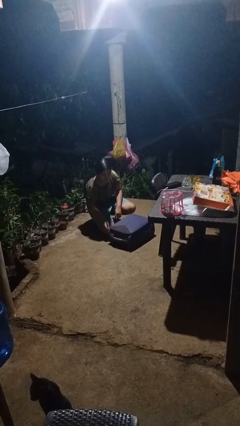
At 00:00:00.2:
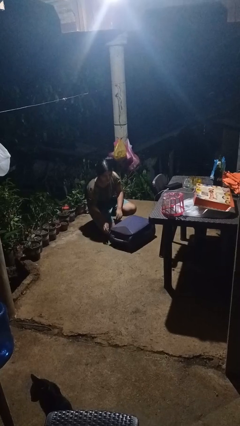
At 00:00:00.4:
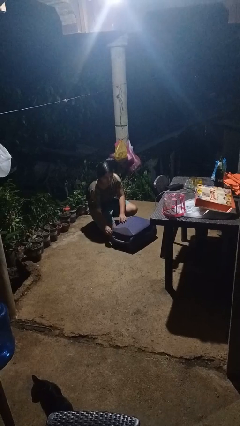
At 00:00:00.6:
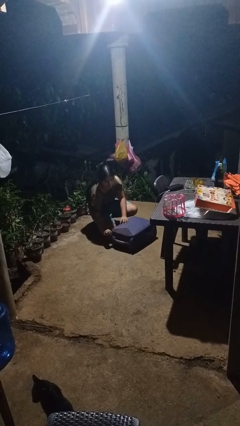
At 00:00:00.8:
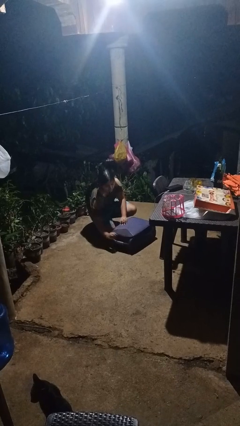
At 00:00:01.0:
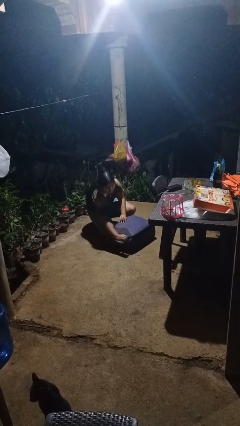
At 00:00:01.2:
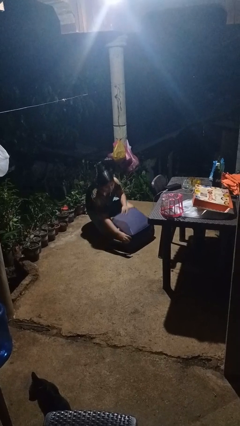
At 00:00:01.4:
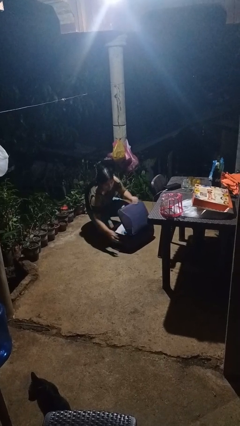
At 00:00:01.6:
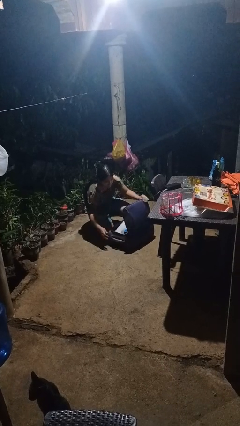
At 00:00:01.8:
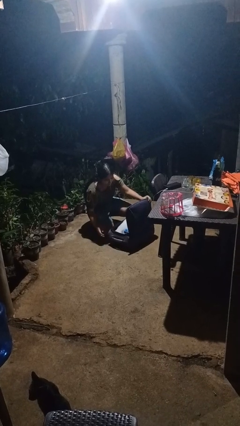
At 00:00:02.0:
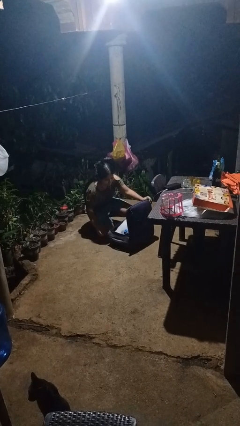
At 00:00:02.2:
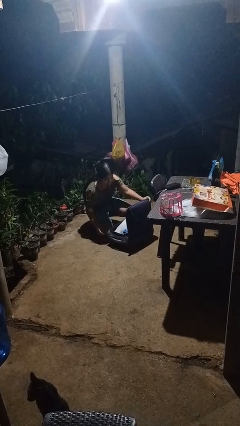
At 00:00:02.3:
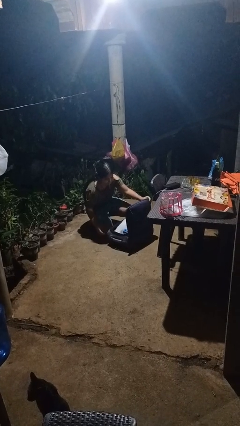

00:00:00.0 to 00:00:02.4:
person opens suitcase

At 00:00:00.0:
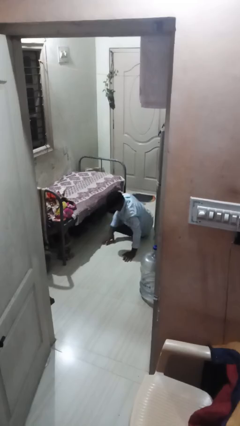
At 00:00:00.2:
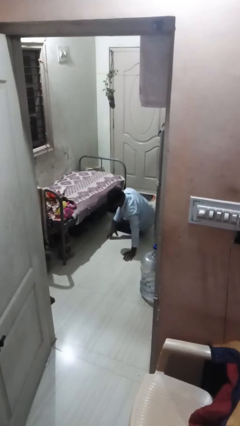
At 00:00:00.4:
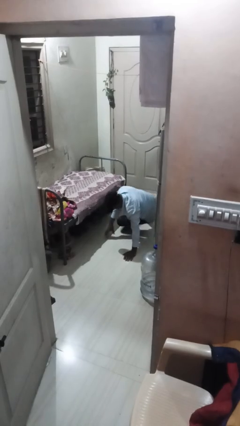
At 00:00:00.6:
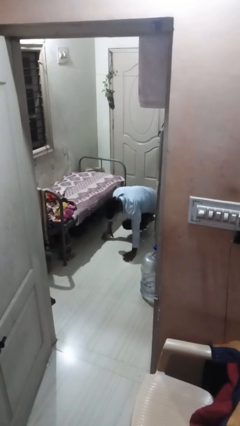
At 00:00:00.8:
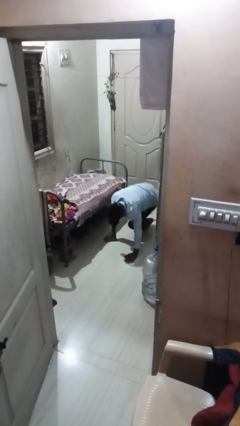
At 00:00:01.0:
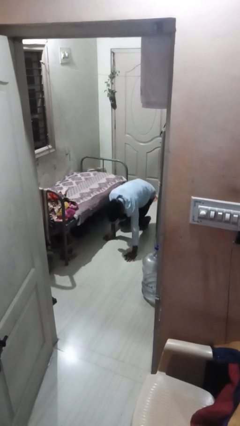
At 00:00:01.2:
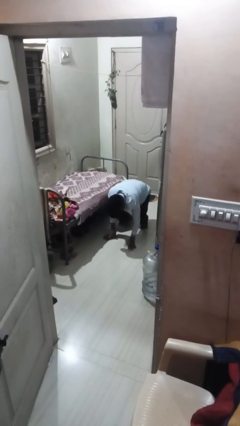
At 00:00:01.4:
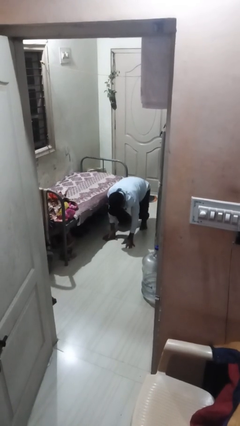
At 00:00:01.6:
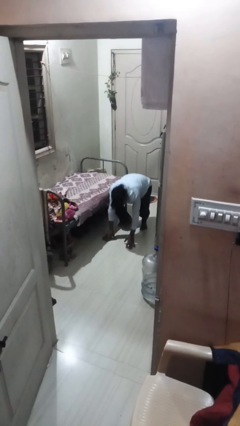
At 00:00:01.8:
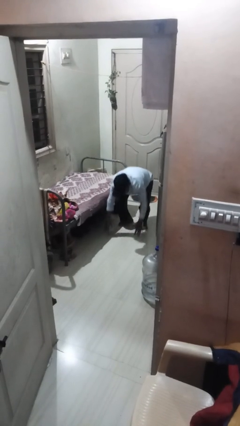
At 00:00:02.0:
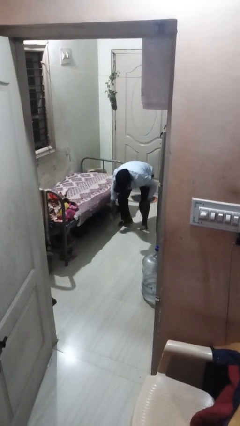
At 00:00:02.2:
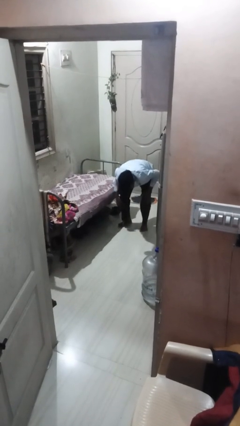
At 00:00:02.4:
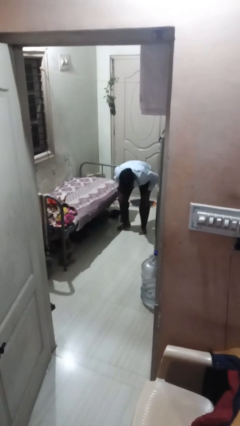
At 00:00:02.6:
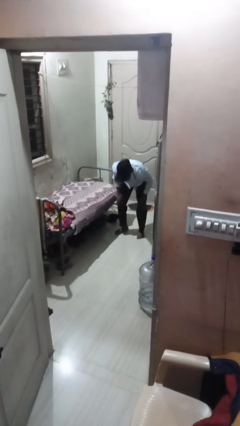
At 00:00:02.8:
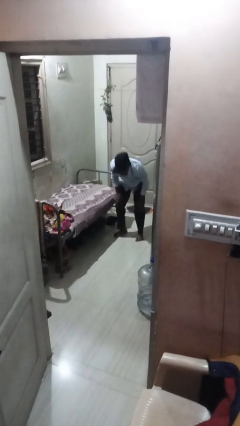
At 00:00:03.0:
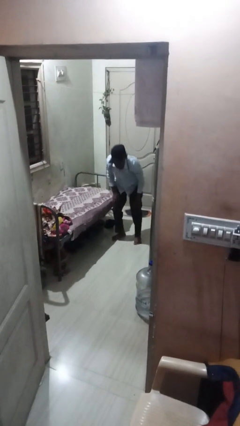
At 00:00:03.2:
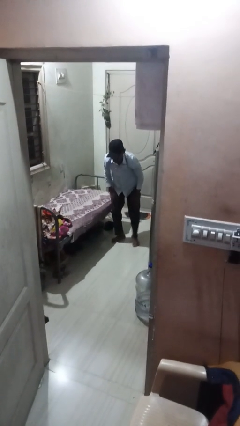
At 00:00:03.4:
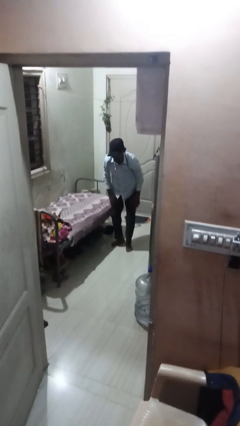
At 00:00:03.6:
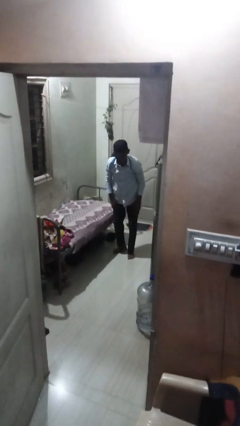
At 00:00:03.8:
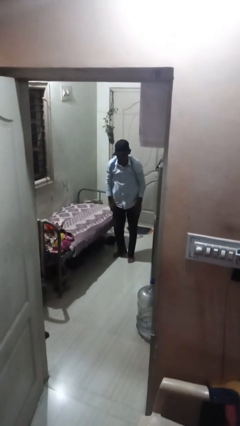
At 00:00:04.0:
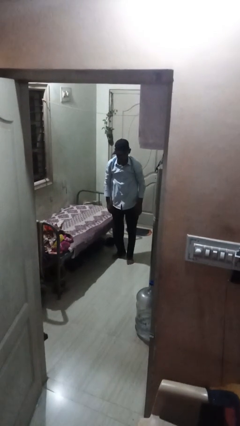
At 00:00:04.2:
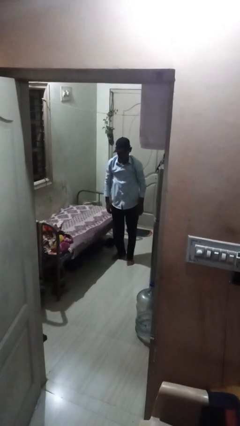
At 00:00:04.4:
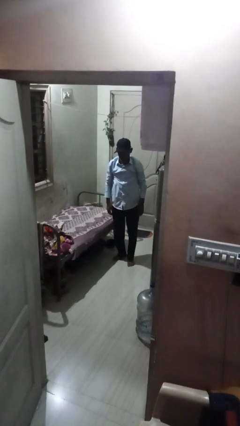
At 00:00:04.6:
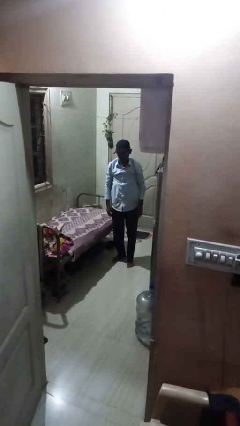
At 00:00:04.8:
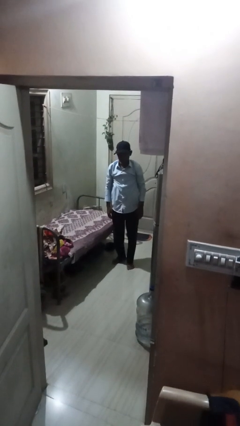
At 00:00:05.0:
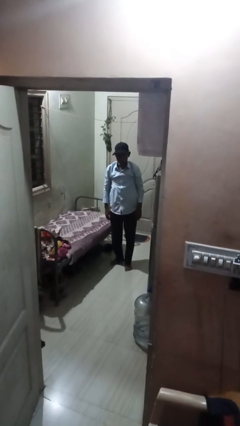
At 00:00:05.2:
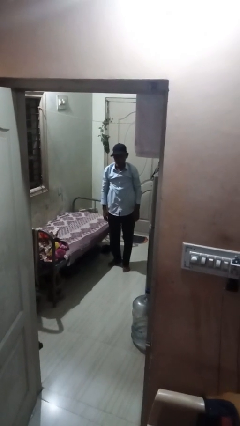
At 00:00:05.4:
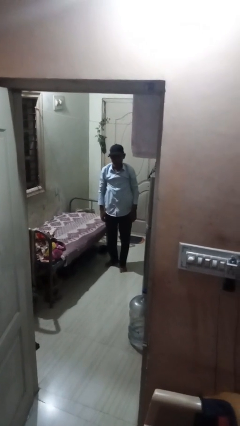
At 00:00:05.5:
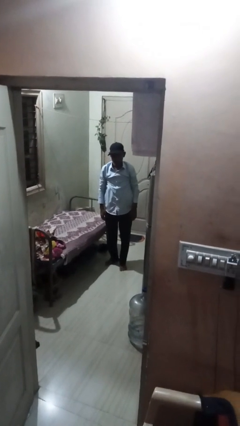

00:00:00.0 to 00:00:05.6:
person stands up from floor

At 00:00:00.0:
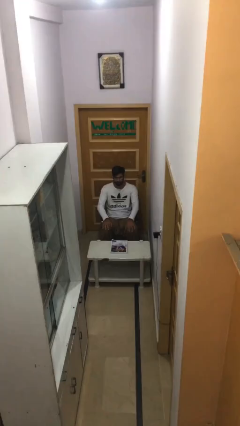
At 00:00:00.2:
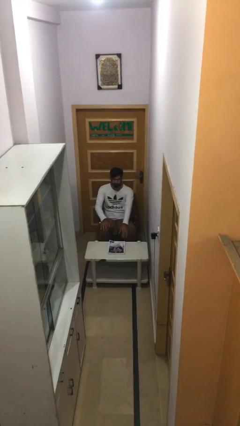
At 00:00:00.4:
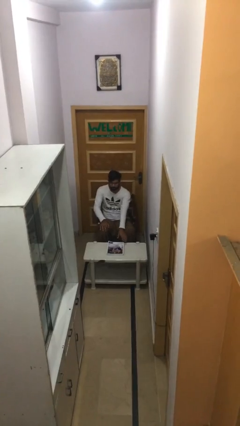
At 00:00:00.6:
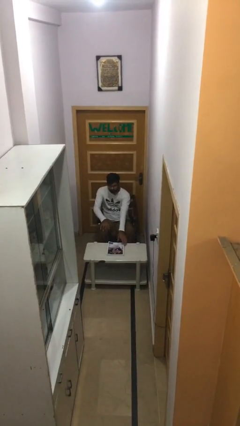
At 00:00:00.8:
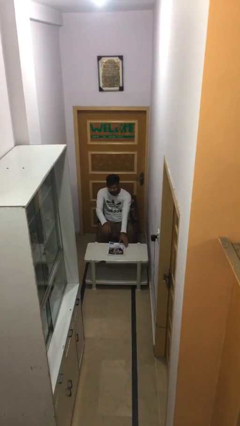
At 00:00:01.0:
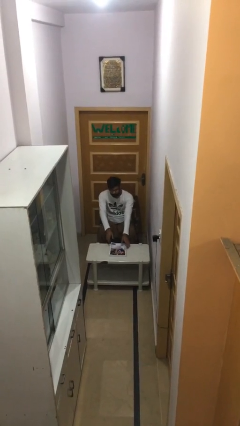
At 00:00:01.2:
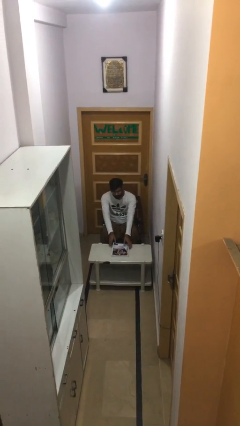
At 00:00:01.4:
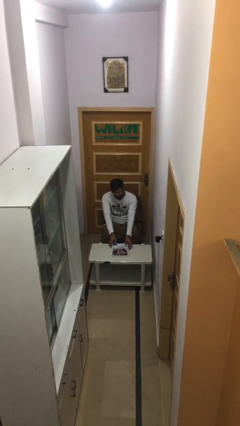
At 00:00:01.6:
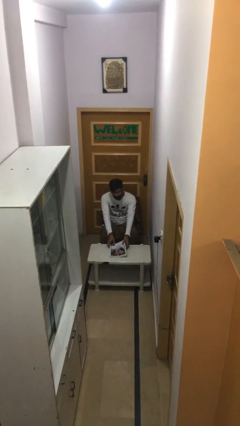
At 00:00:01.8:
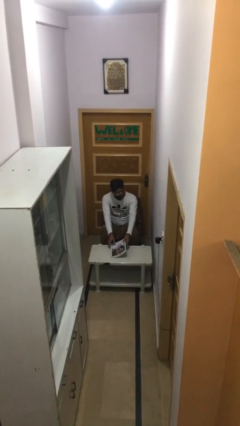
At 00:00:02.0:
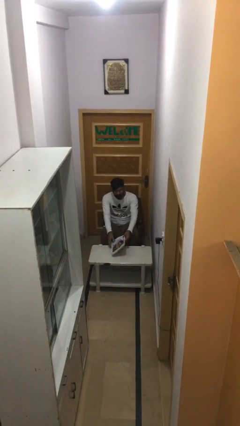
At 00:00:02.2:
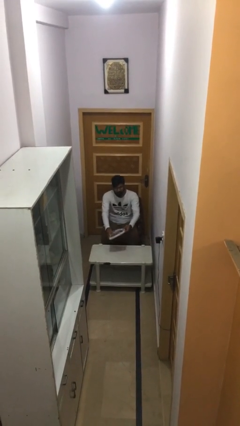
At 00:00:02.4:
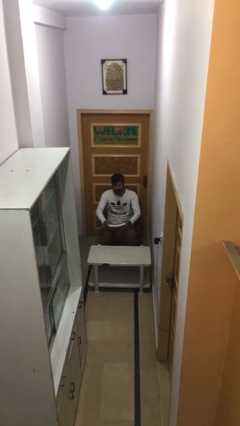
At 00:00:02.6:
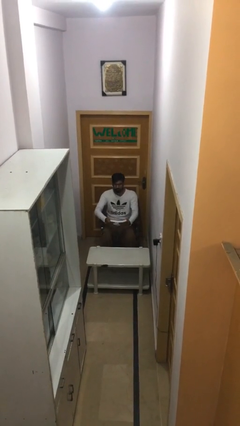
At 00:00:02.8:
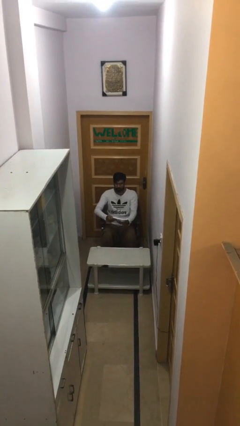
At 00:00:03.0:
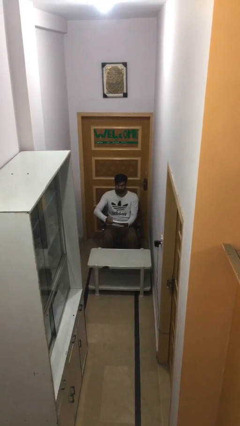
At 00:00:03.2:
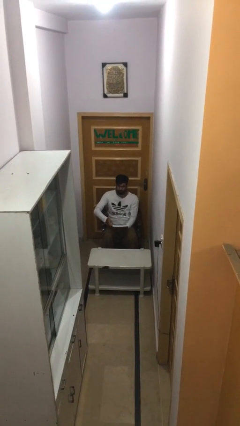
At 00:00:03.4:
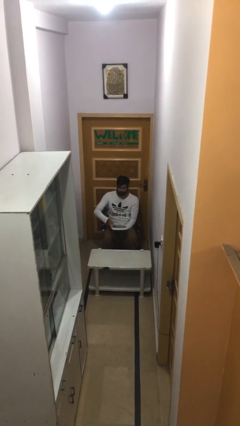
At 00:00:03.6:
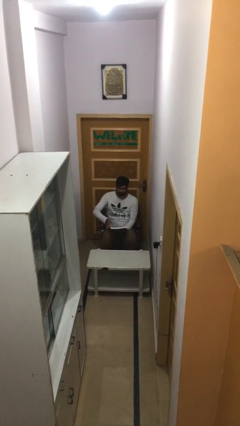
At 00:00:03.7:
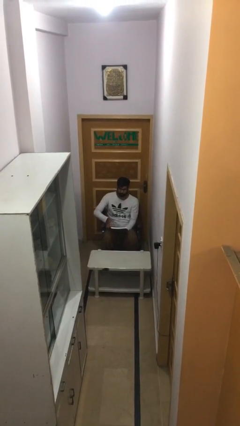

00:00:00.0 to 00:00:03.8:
person picks up object from table

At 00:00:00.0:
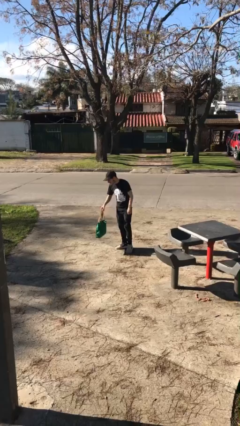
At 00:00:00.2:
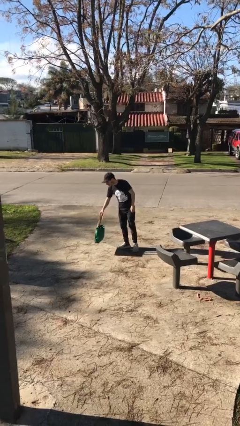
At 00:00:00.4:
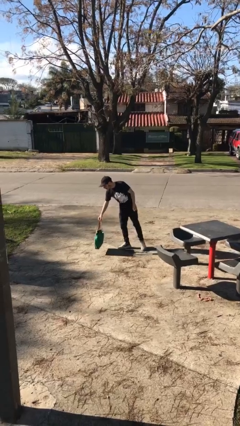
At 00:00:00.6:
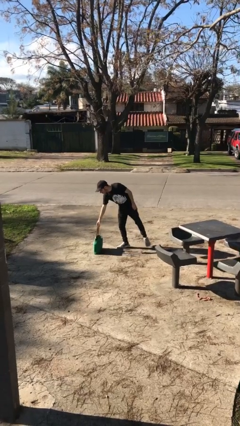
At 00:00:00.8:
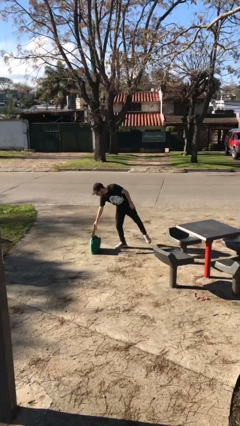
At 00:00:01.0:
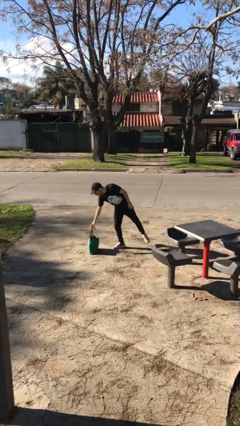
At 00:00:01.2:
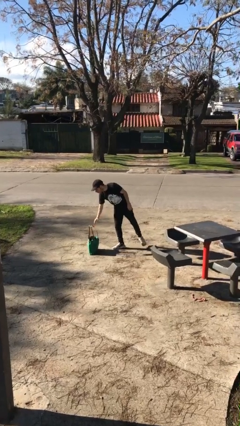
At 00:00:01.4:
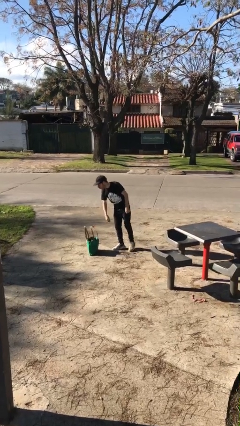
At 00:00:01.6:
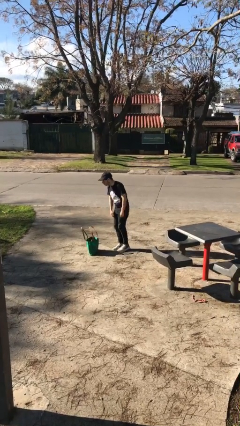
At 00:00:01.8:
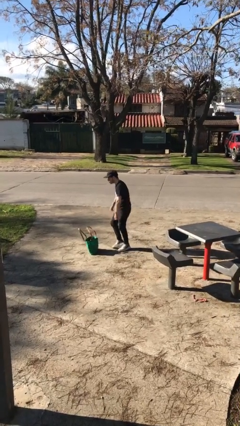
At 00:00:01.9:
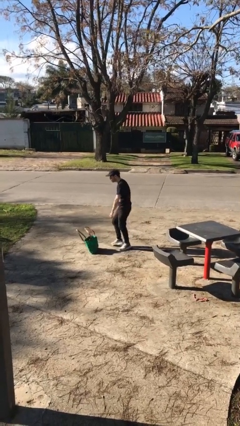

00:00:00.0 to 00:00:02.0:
person puts down object on floor

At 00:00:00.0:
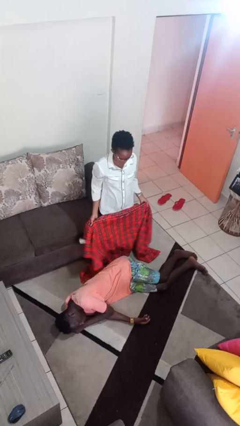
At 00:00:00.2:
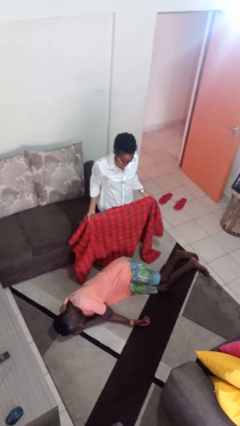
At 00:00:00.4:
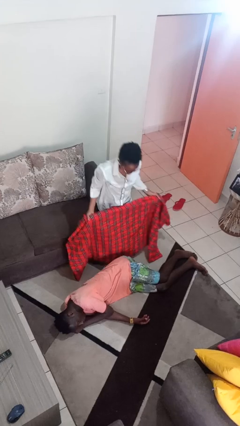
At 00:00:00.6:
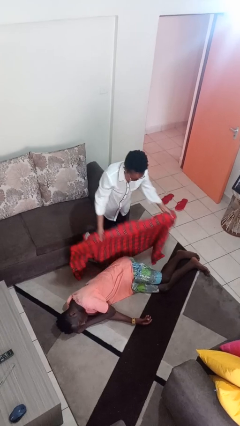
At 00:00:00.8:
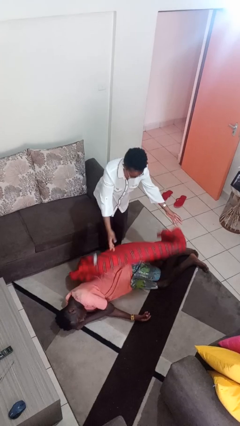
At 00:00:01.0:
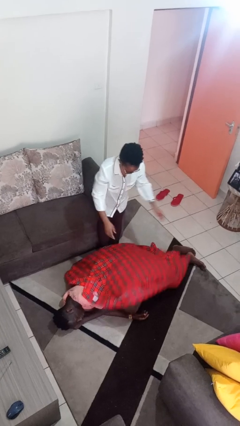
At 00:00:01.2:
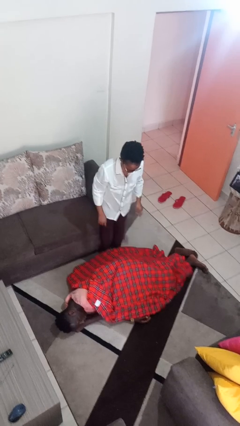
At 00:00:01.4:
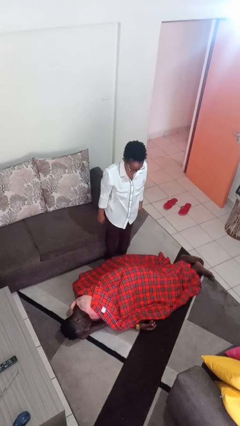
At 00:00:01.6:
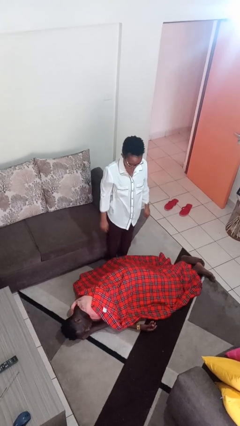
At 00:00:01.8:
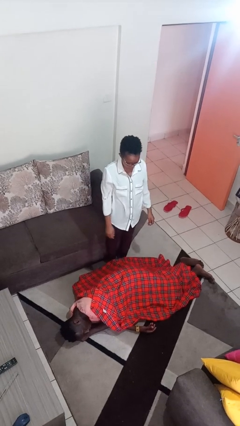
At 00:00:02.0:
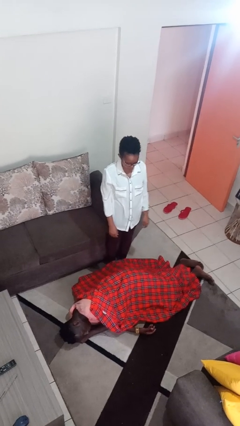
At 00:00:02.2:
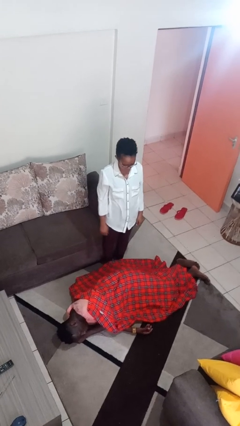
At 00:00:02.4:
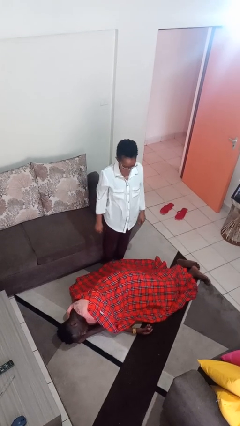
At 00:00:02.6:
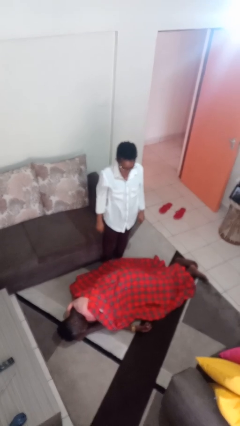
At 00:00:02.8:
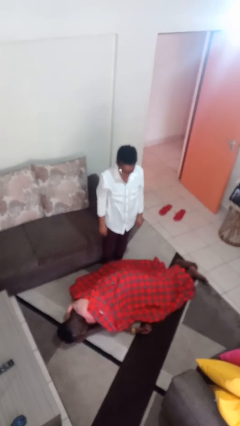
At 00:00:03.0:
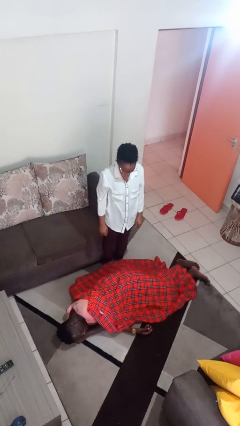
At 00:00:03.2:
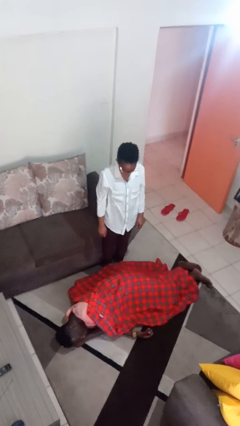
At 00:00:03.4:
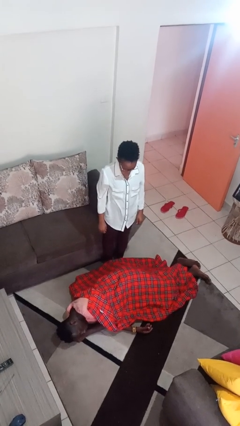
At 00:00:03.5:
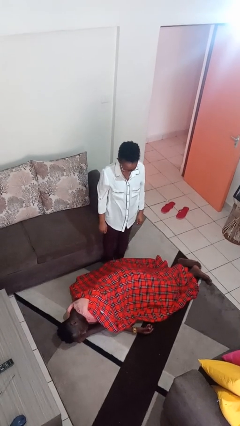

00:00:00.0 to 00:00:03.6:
person covers friend with blanket
